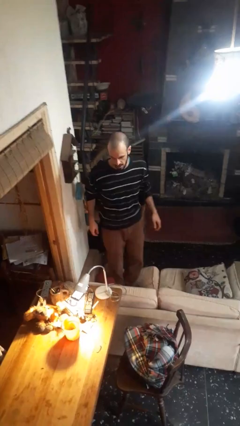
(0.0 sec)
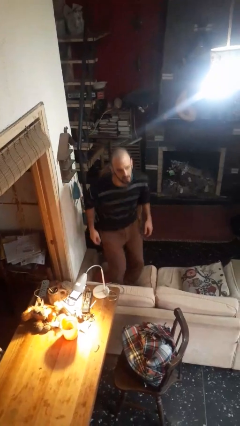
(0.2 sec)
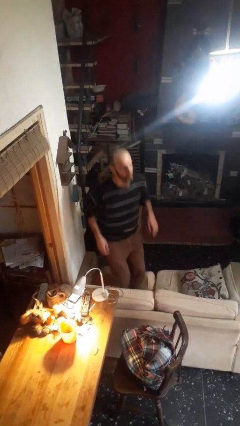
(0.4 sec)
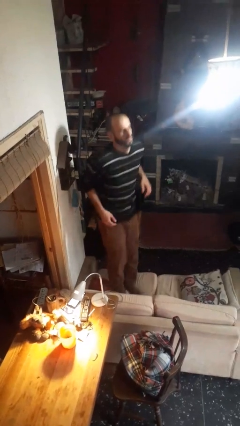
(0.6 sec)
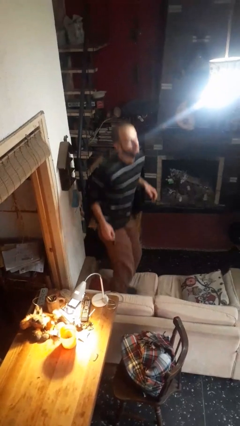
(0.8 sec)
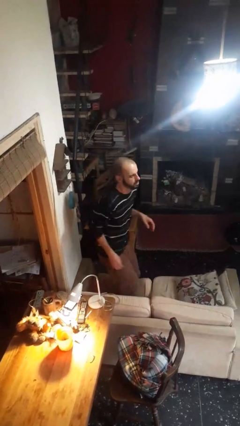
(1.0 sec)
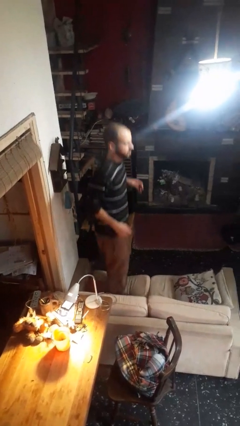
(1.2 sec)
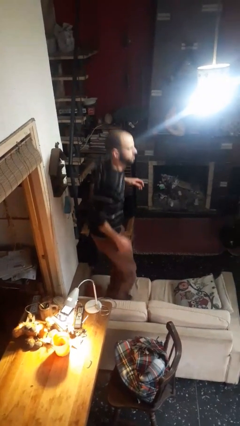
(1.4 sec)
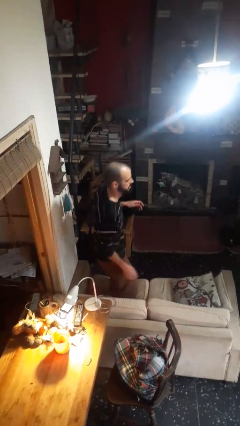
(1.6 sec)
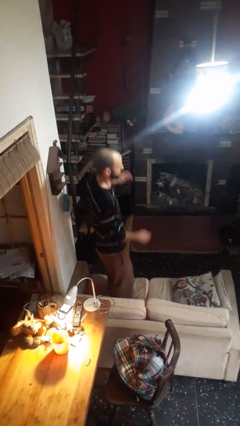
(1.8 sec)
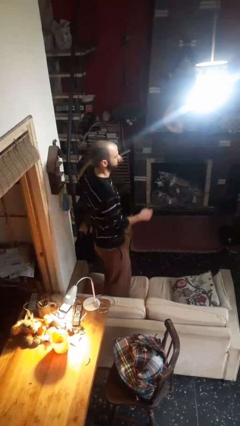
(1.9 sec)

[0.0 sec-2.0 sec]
person jumps on couch

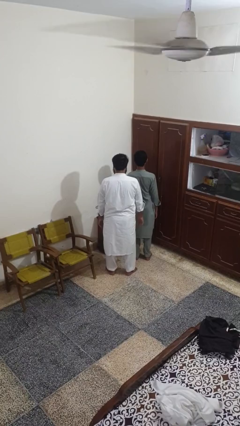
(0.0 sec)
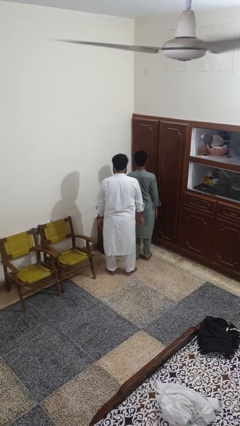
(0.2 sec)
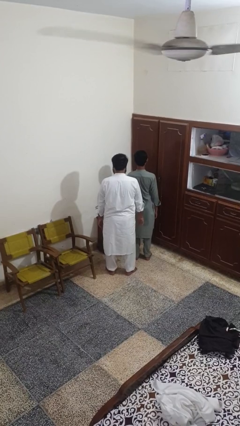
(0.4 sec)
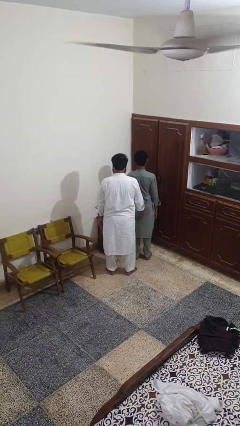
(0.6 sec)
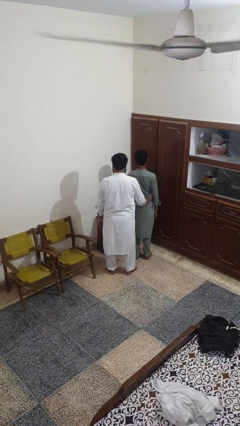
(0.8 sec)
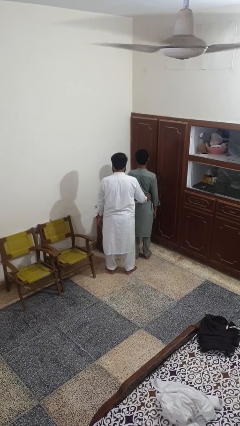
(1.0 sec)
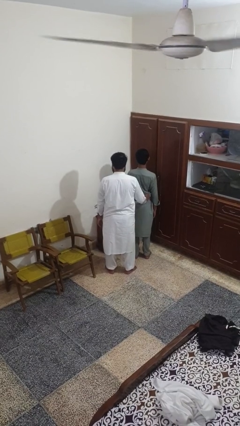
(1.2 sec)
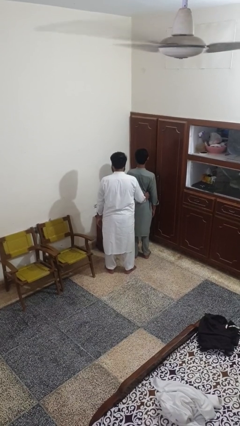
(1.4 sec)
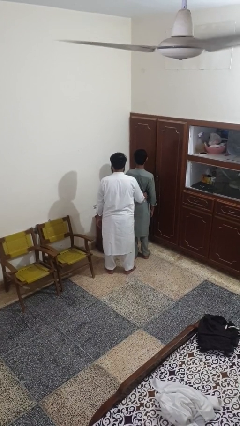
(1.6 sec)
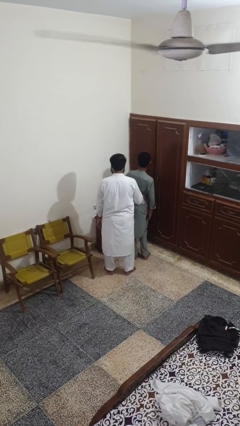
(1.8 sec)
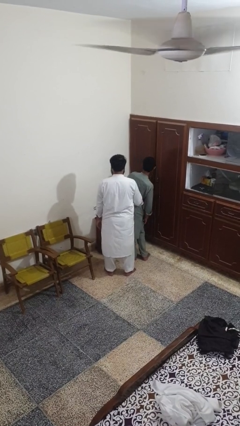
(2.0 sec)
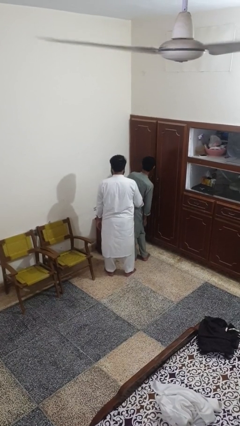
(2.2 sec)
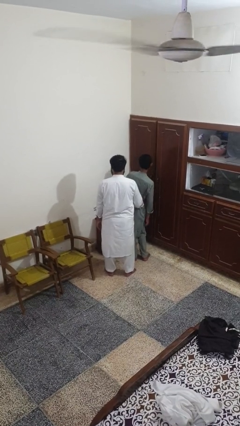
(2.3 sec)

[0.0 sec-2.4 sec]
person tickles person

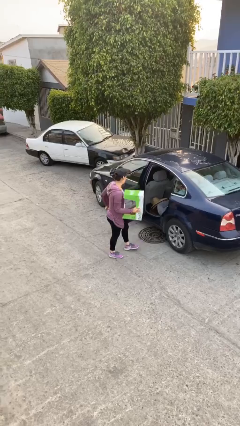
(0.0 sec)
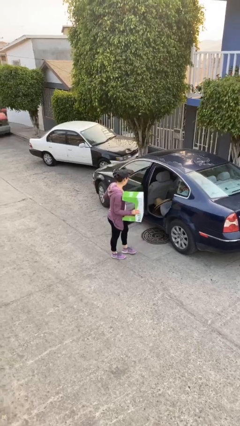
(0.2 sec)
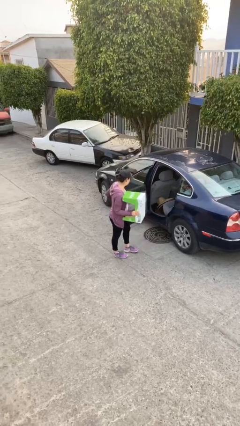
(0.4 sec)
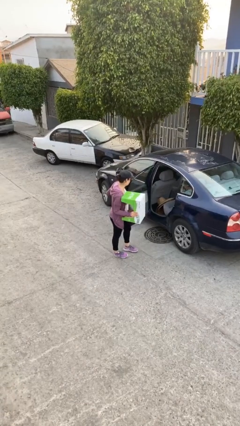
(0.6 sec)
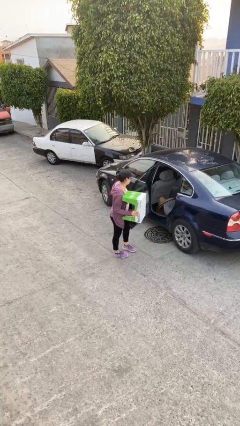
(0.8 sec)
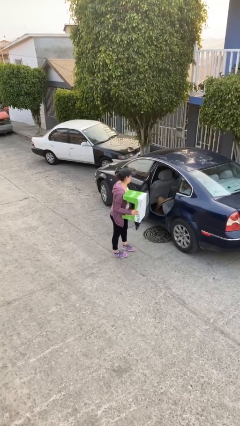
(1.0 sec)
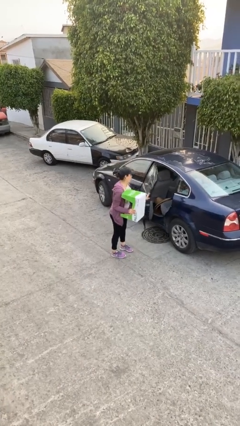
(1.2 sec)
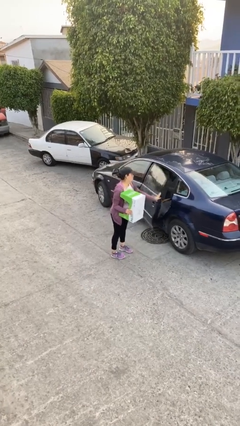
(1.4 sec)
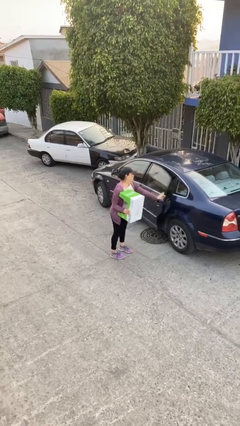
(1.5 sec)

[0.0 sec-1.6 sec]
person closes car door

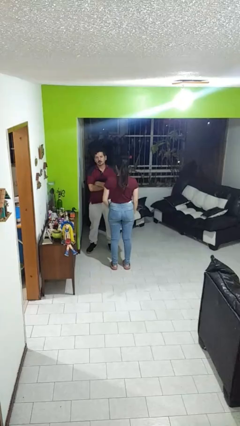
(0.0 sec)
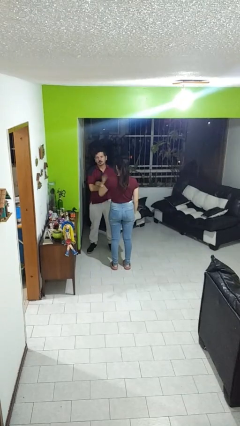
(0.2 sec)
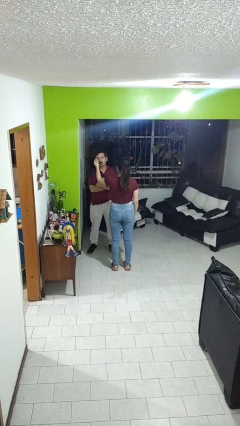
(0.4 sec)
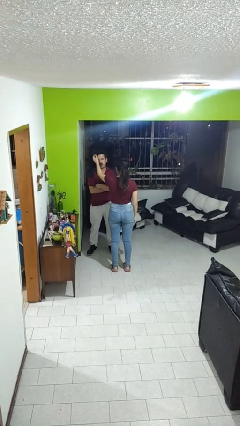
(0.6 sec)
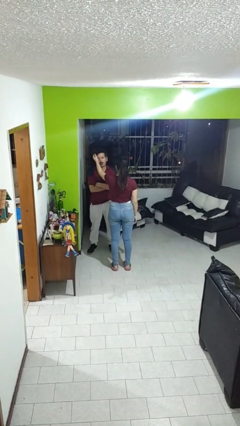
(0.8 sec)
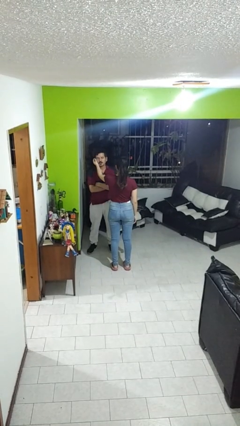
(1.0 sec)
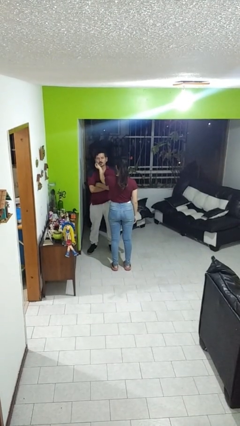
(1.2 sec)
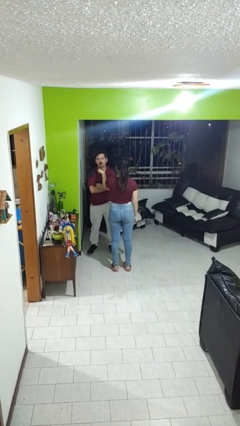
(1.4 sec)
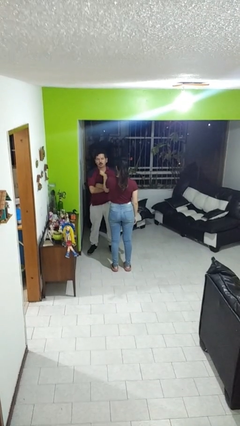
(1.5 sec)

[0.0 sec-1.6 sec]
person touches face of person

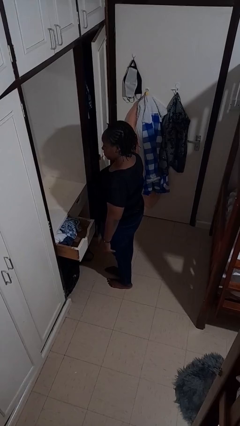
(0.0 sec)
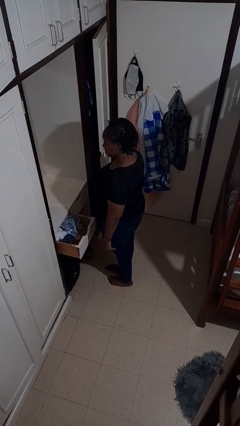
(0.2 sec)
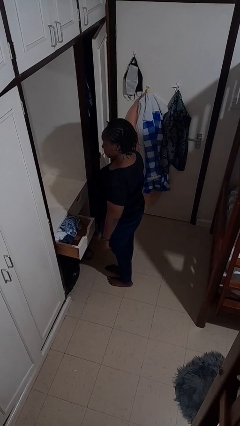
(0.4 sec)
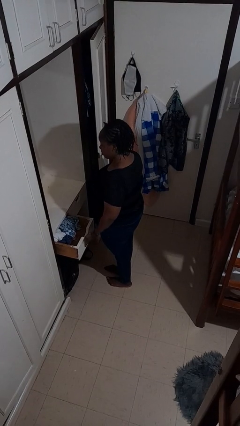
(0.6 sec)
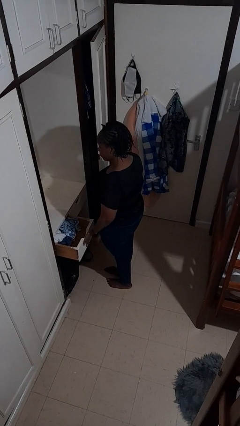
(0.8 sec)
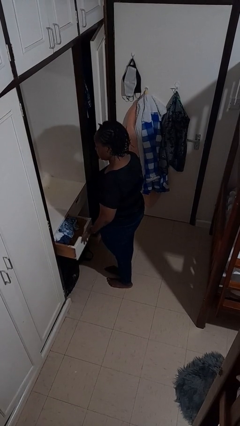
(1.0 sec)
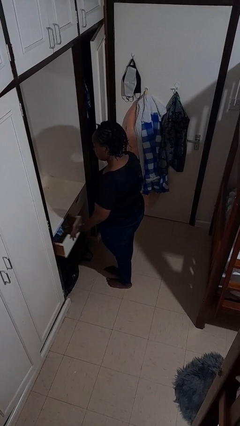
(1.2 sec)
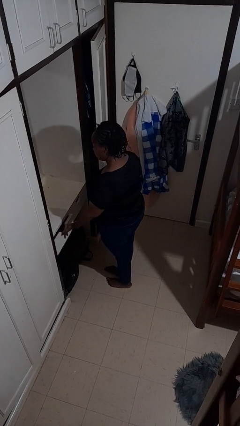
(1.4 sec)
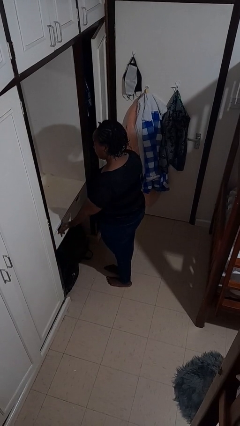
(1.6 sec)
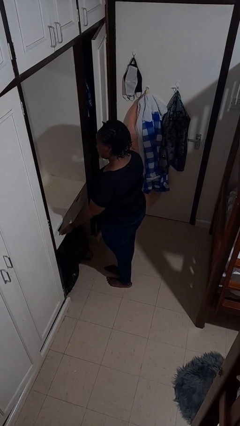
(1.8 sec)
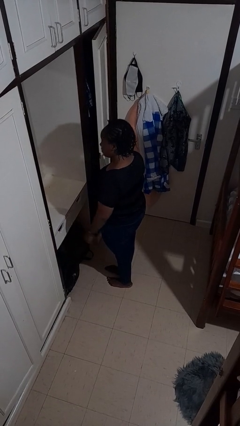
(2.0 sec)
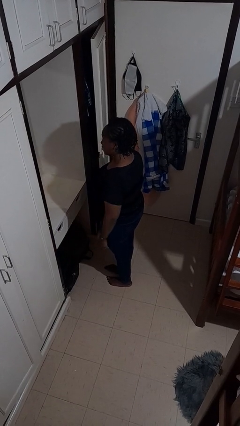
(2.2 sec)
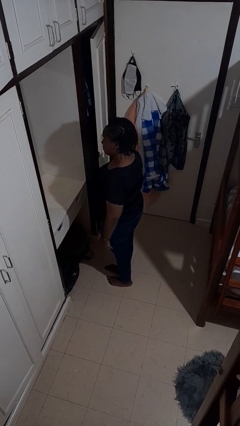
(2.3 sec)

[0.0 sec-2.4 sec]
person closes dresser drawer

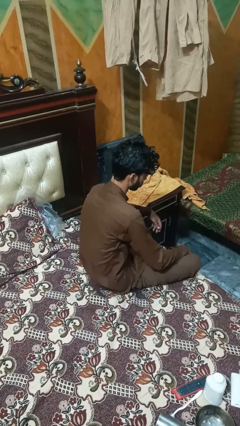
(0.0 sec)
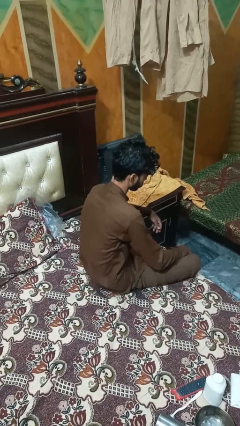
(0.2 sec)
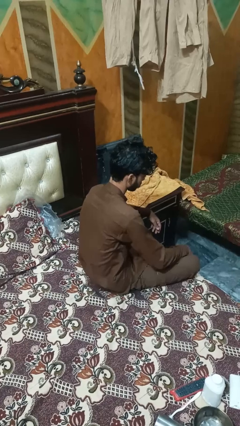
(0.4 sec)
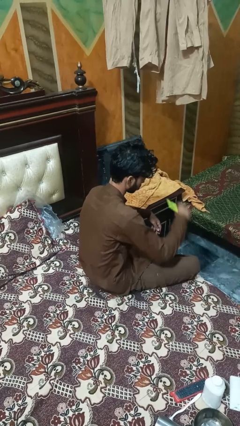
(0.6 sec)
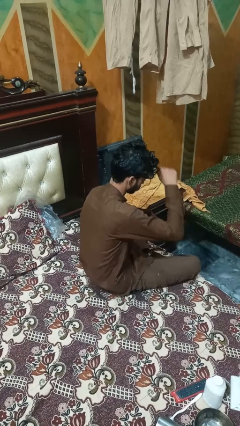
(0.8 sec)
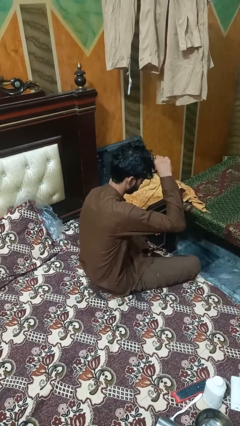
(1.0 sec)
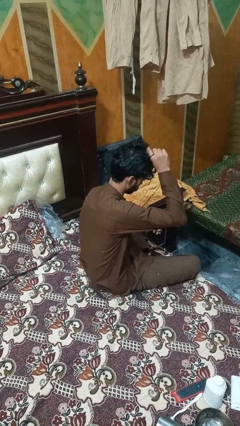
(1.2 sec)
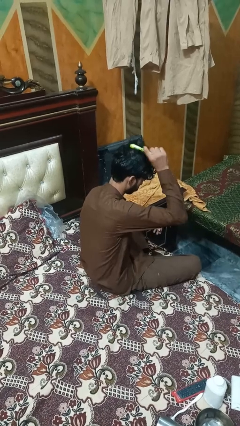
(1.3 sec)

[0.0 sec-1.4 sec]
person brushes hair

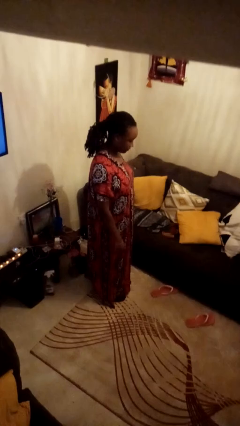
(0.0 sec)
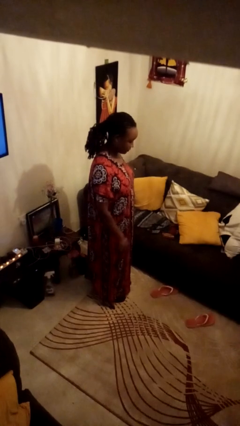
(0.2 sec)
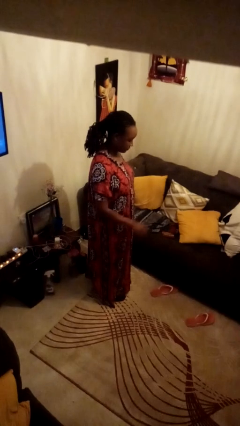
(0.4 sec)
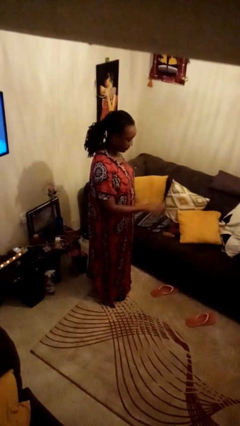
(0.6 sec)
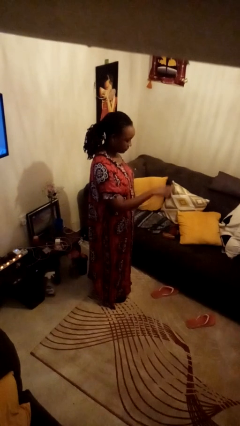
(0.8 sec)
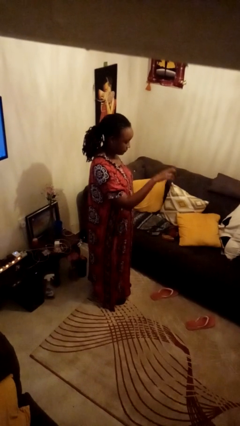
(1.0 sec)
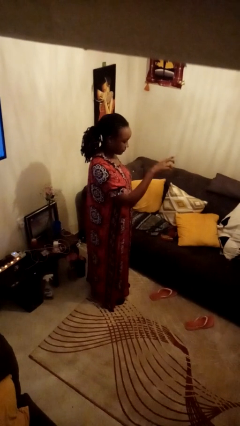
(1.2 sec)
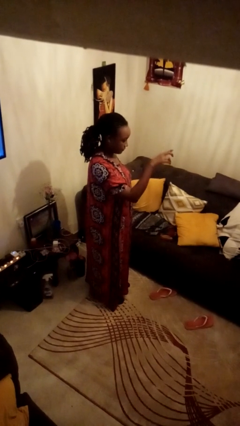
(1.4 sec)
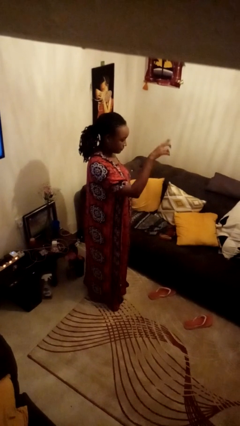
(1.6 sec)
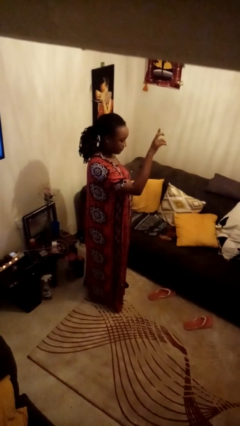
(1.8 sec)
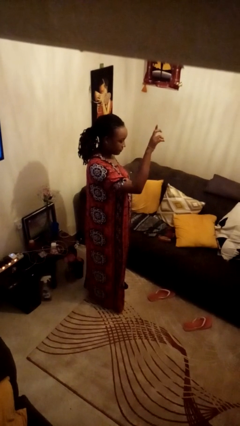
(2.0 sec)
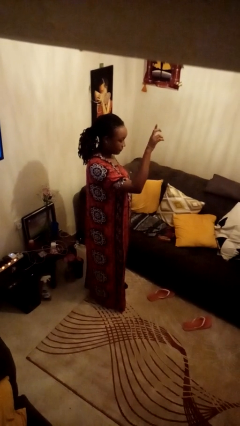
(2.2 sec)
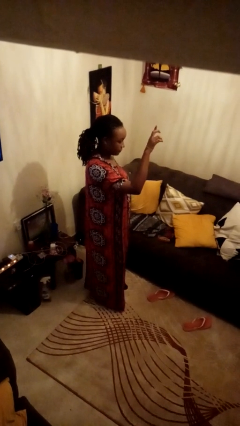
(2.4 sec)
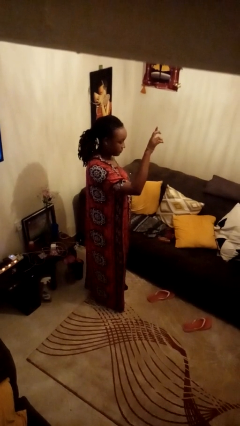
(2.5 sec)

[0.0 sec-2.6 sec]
person gestures swipe up

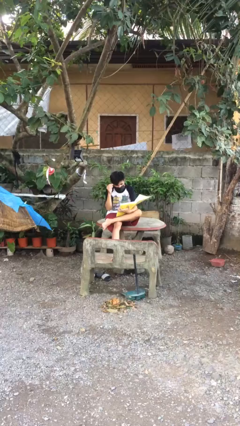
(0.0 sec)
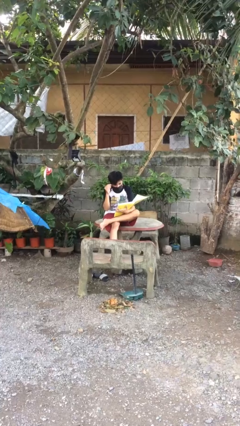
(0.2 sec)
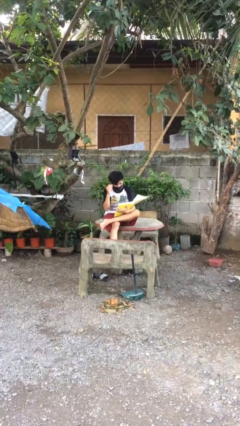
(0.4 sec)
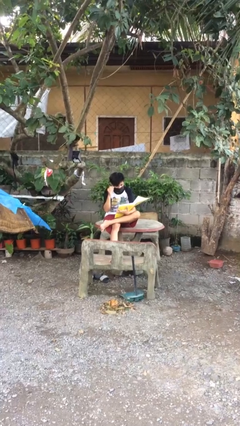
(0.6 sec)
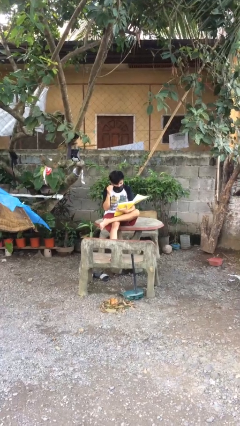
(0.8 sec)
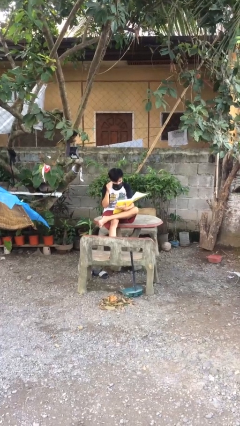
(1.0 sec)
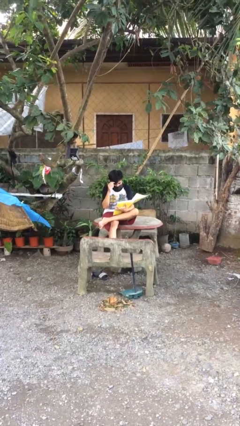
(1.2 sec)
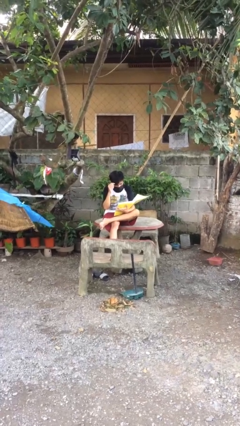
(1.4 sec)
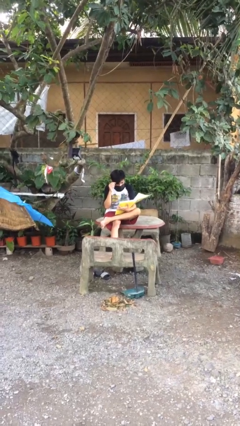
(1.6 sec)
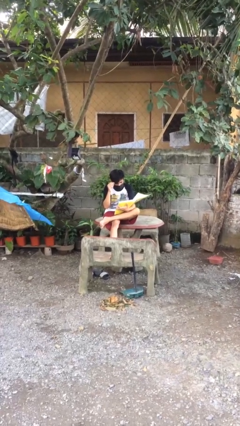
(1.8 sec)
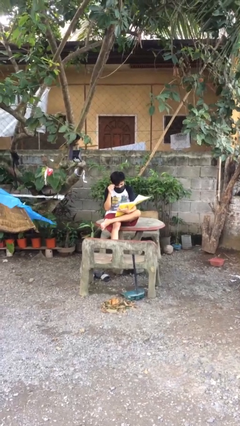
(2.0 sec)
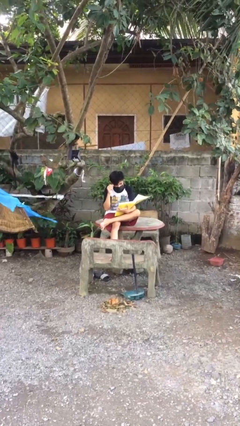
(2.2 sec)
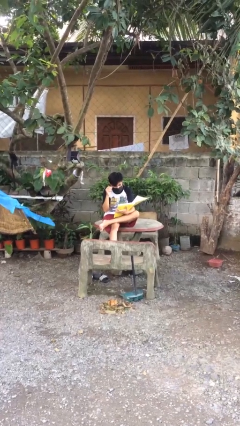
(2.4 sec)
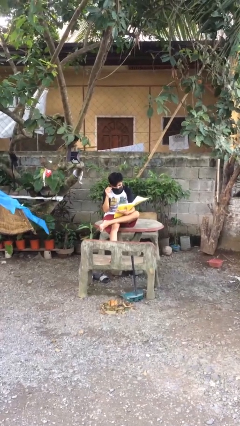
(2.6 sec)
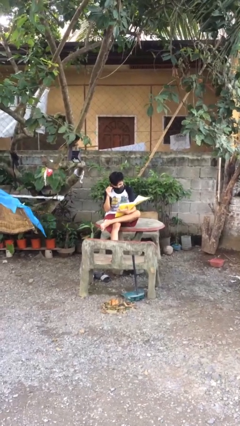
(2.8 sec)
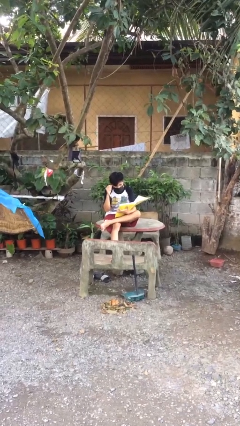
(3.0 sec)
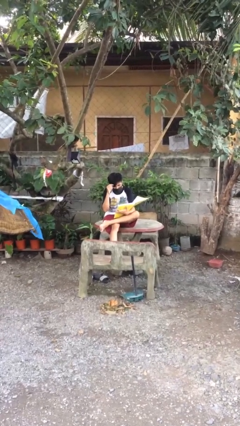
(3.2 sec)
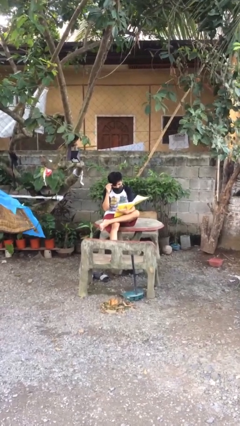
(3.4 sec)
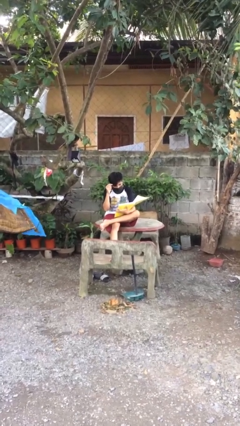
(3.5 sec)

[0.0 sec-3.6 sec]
person reads document
